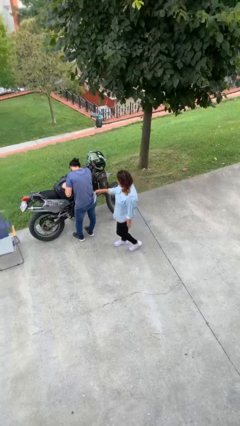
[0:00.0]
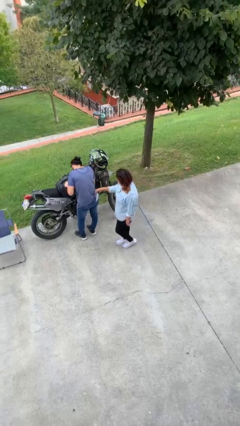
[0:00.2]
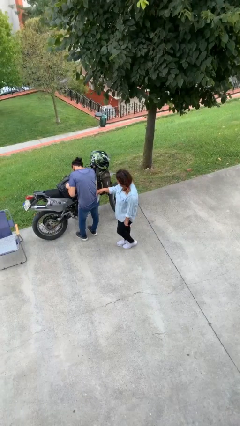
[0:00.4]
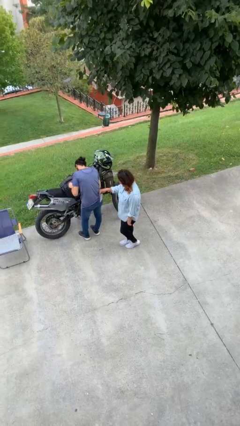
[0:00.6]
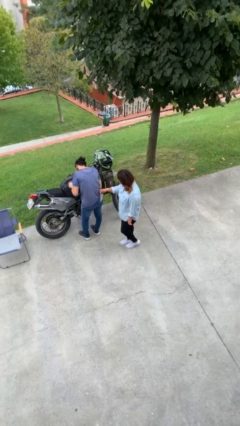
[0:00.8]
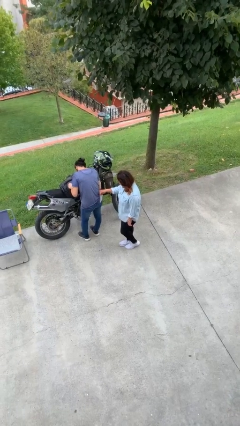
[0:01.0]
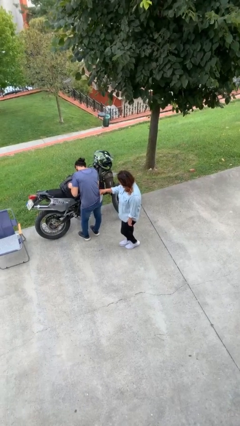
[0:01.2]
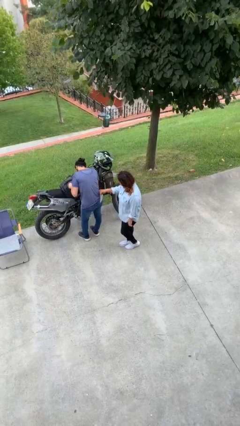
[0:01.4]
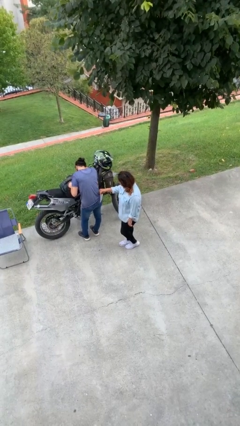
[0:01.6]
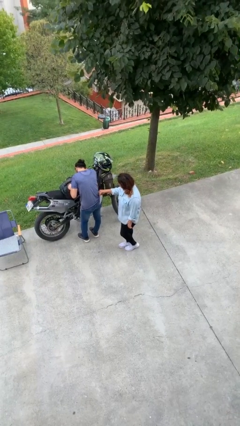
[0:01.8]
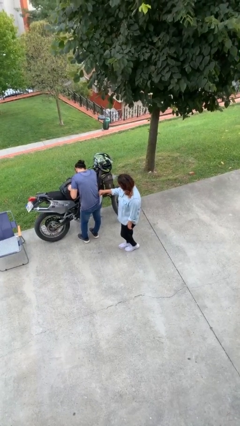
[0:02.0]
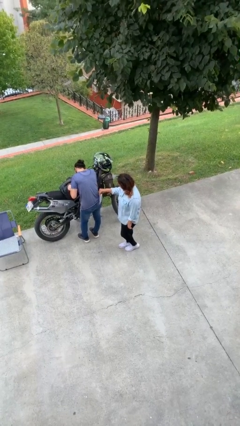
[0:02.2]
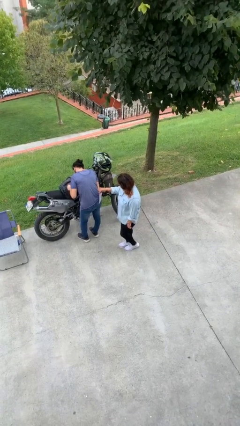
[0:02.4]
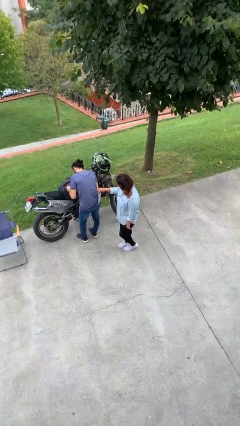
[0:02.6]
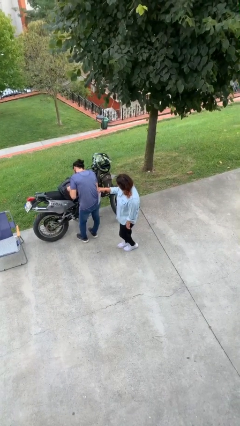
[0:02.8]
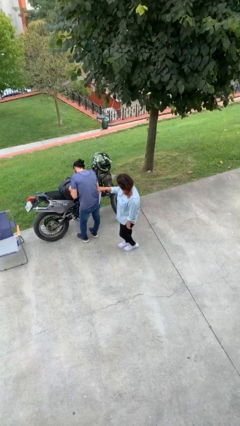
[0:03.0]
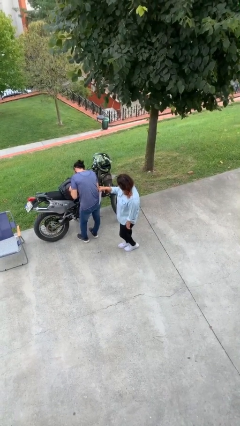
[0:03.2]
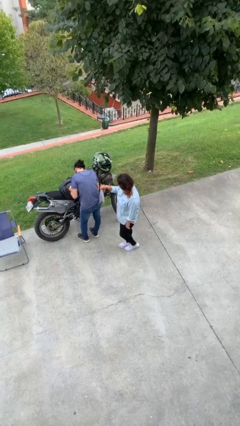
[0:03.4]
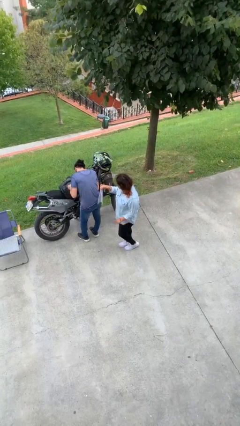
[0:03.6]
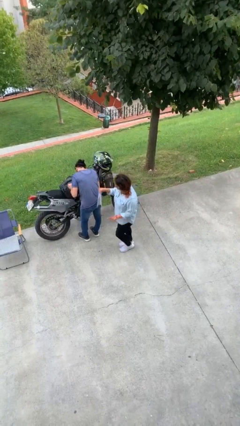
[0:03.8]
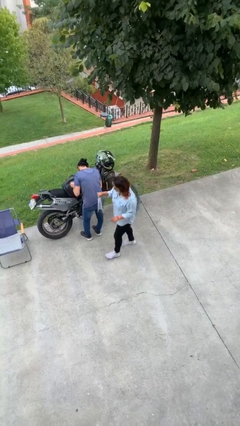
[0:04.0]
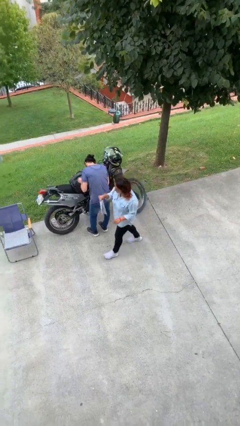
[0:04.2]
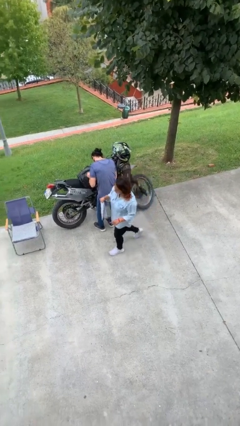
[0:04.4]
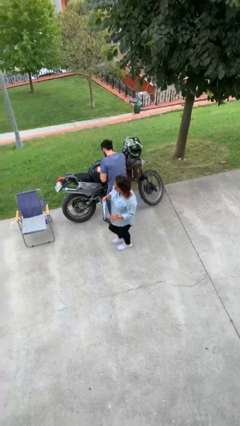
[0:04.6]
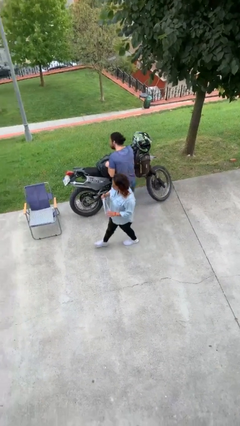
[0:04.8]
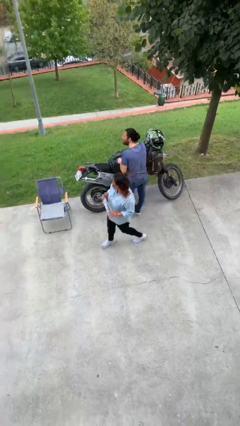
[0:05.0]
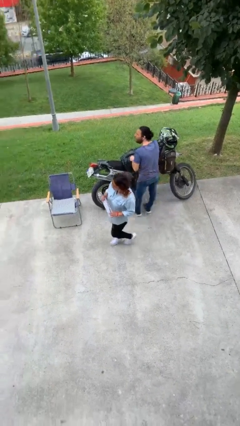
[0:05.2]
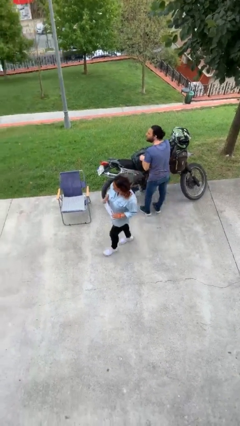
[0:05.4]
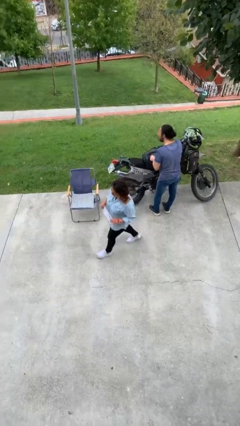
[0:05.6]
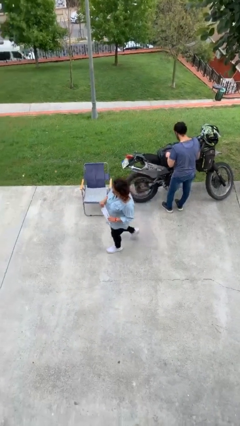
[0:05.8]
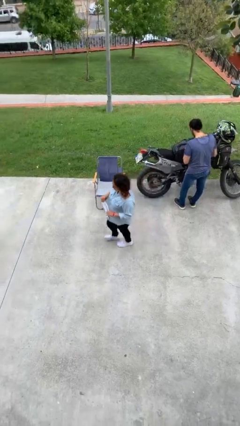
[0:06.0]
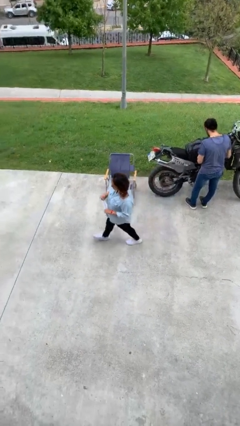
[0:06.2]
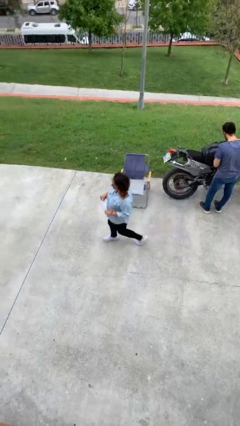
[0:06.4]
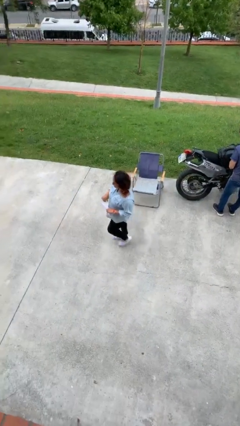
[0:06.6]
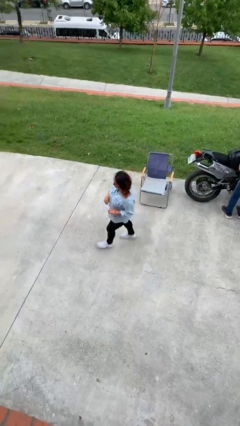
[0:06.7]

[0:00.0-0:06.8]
person steals object from person

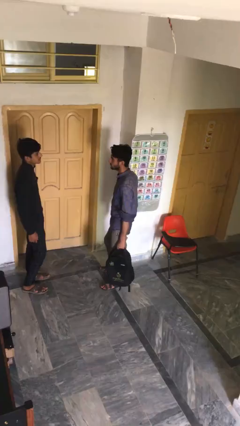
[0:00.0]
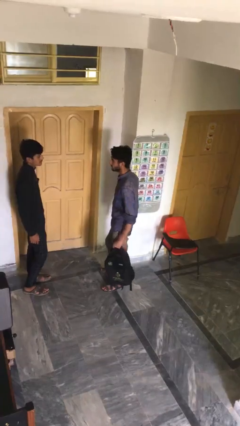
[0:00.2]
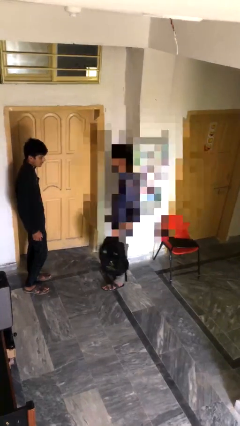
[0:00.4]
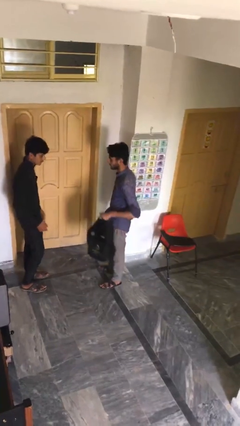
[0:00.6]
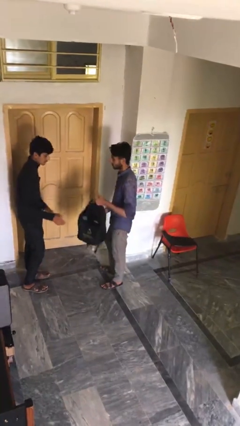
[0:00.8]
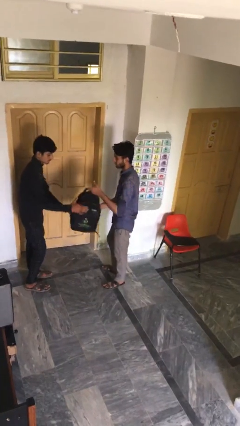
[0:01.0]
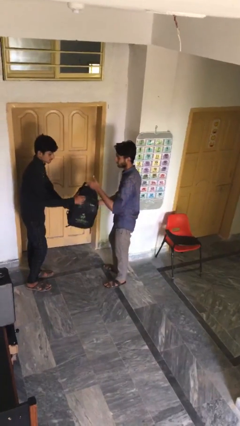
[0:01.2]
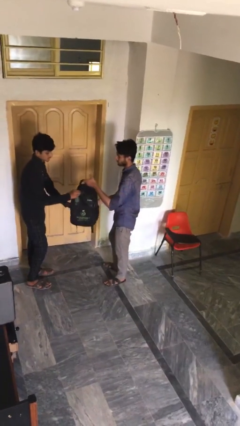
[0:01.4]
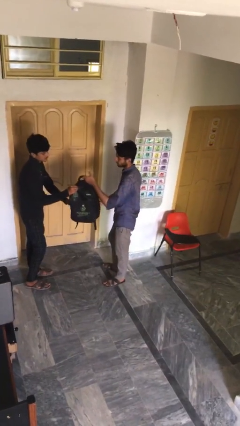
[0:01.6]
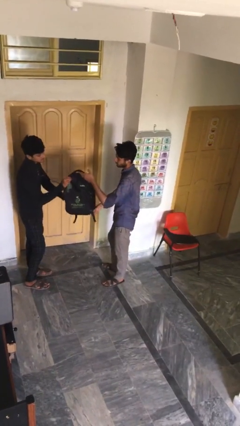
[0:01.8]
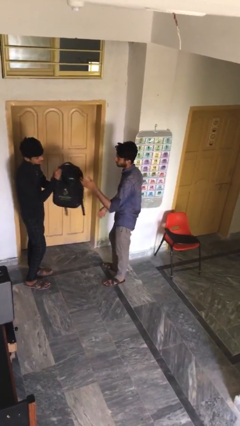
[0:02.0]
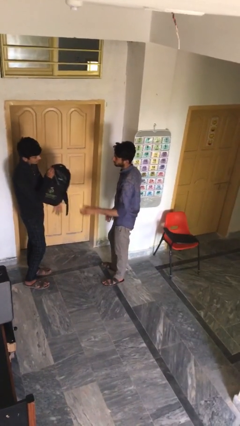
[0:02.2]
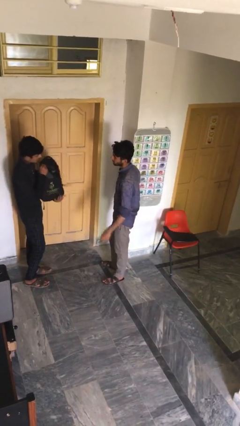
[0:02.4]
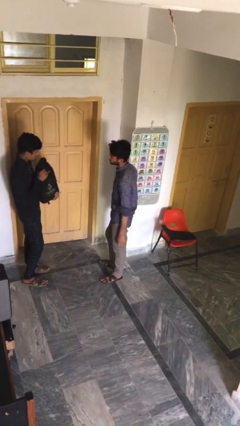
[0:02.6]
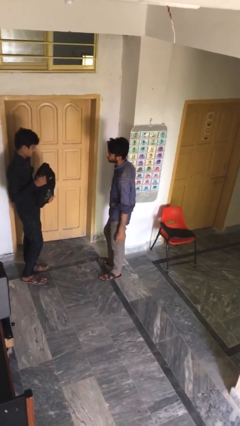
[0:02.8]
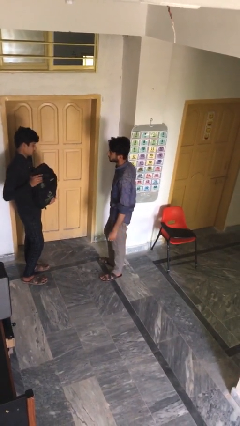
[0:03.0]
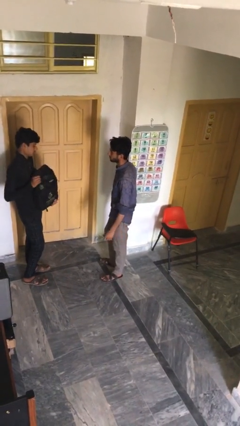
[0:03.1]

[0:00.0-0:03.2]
person transfers object to person

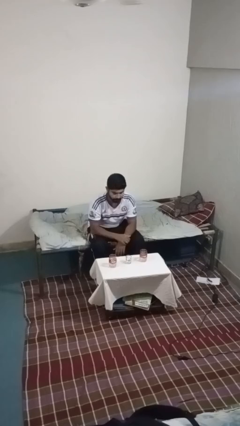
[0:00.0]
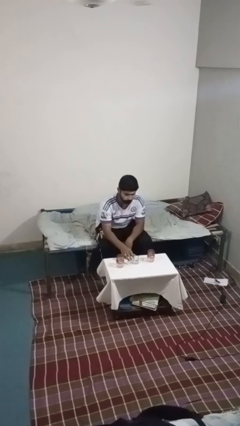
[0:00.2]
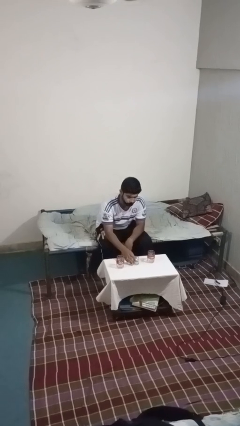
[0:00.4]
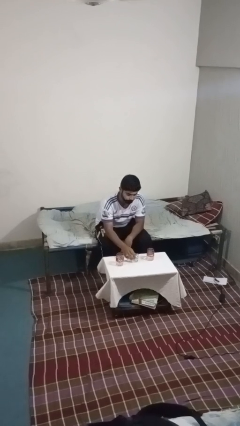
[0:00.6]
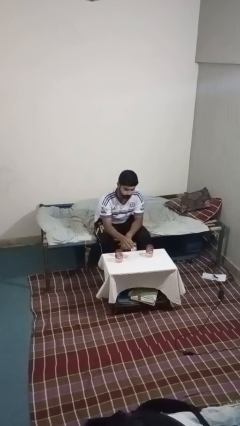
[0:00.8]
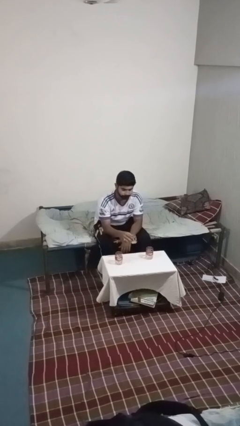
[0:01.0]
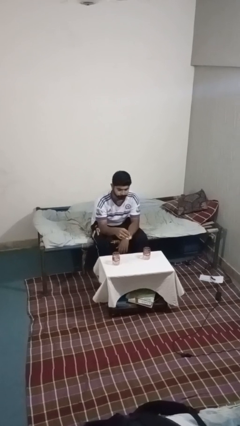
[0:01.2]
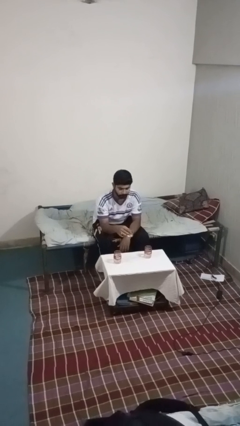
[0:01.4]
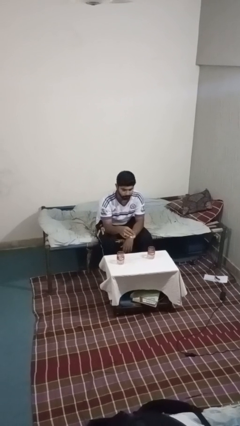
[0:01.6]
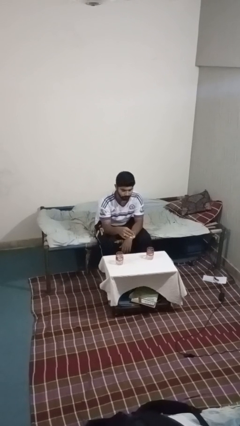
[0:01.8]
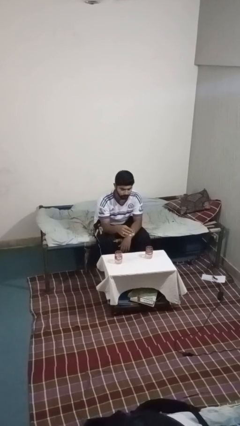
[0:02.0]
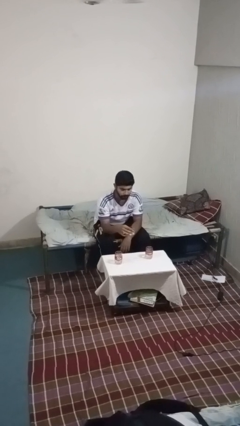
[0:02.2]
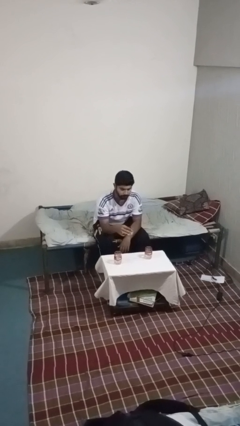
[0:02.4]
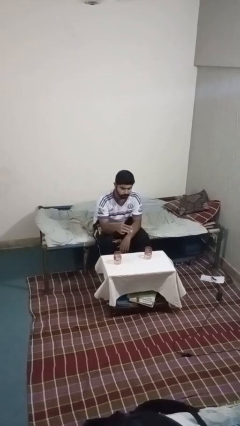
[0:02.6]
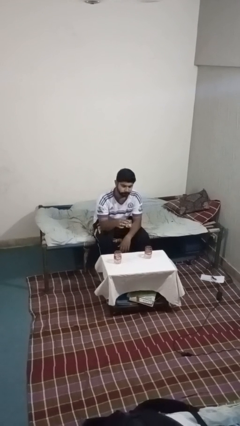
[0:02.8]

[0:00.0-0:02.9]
person picks up object from table

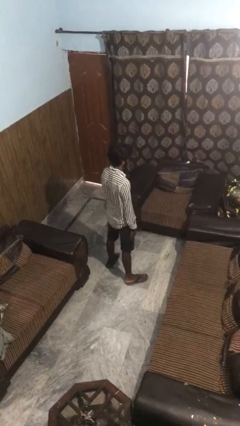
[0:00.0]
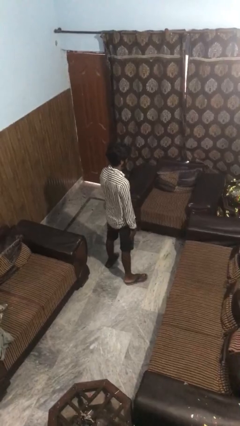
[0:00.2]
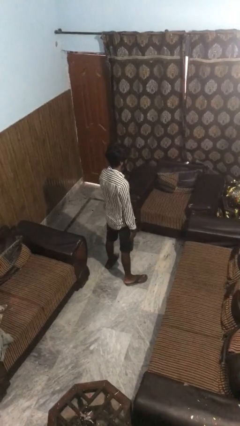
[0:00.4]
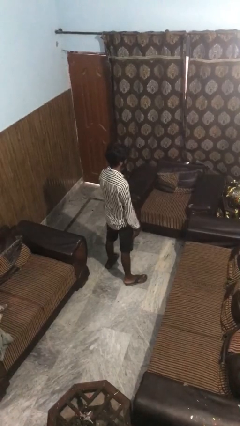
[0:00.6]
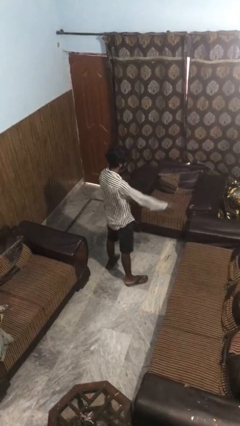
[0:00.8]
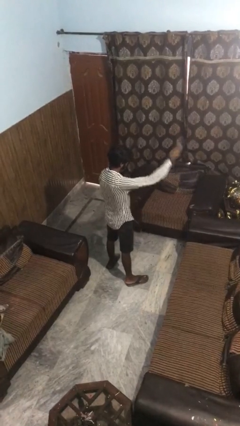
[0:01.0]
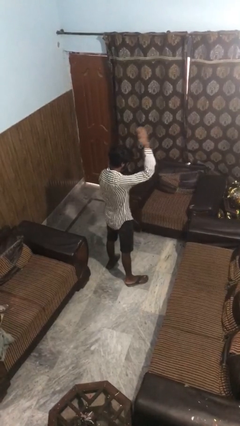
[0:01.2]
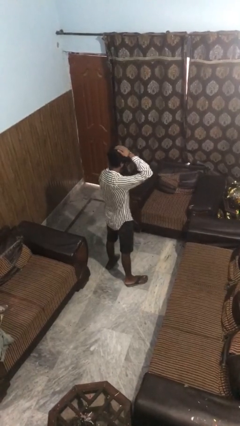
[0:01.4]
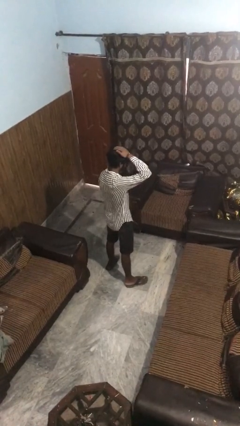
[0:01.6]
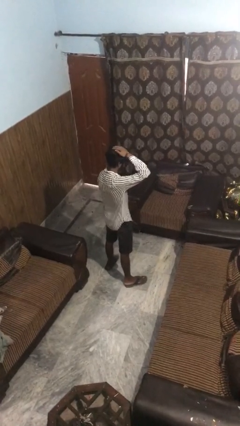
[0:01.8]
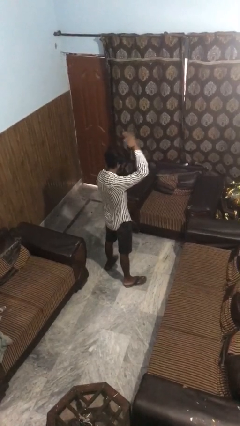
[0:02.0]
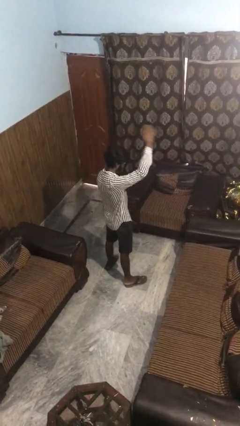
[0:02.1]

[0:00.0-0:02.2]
person pats head

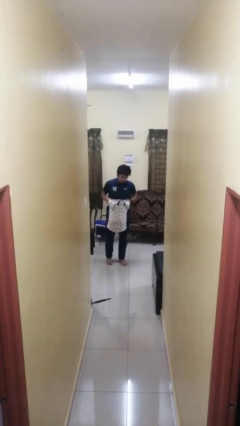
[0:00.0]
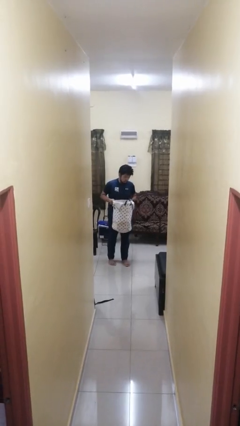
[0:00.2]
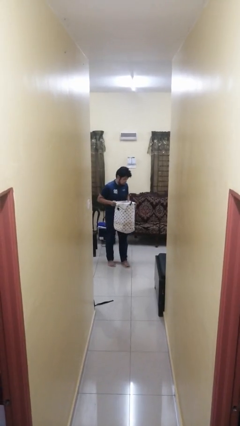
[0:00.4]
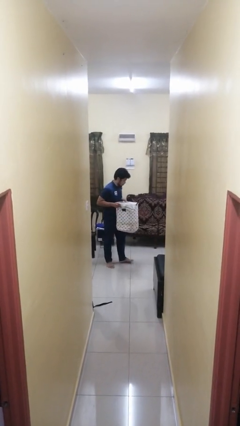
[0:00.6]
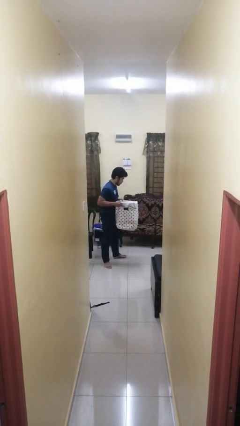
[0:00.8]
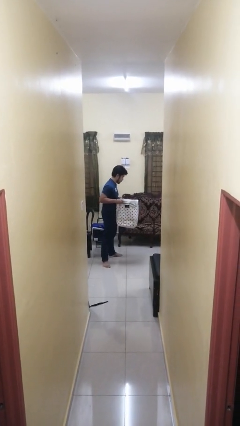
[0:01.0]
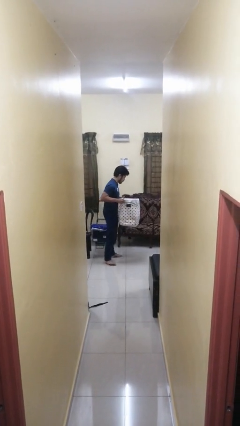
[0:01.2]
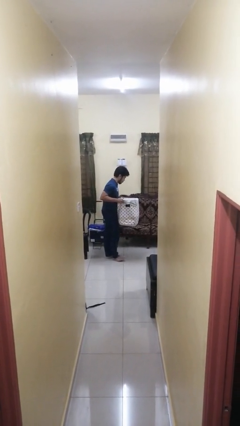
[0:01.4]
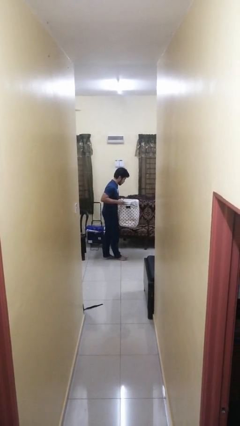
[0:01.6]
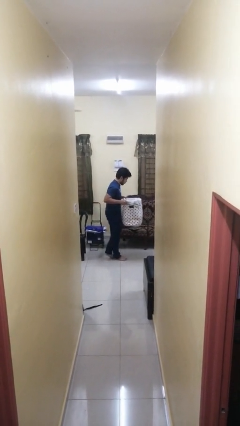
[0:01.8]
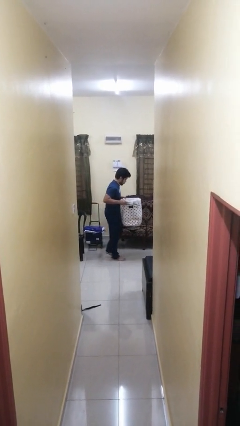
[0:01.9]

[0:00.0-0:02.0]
person carries laundry basket

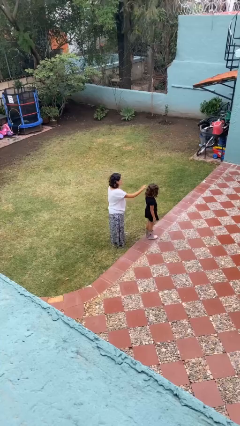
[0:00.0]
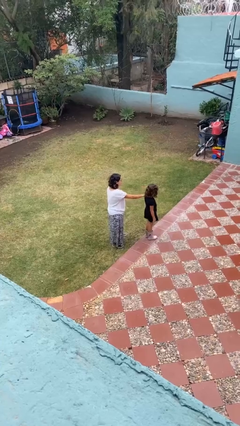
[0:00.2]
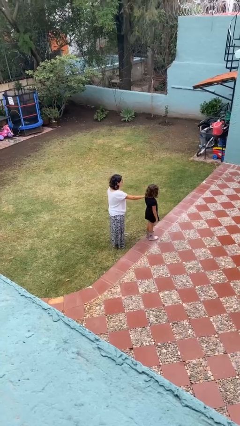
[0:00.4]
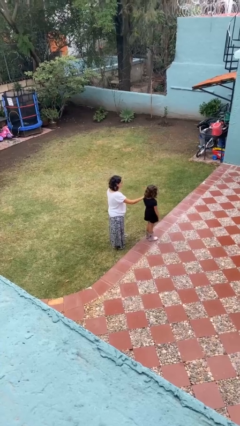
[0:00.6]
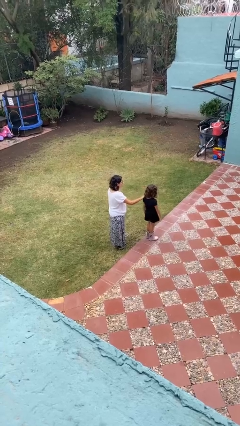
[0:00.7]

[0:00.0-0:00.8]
person grabs person by shoulder
